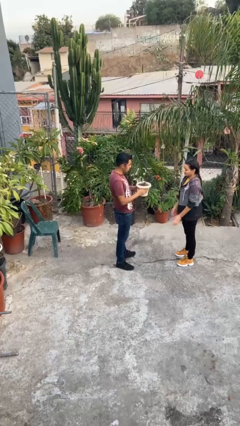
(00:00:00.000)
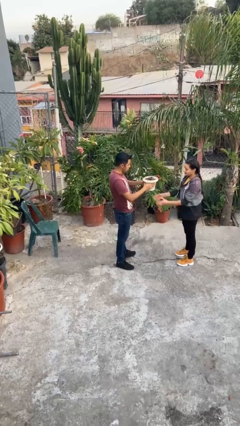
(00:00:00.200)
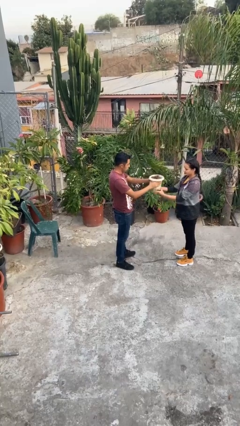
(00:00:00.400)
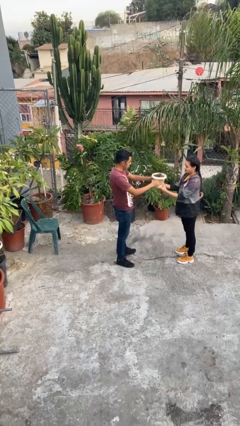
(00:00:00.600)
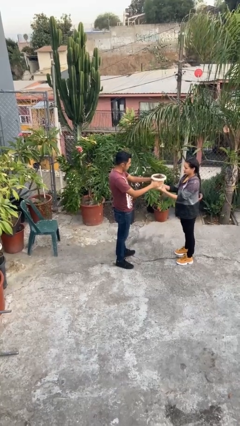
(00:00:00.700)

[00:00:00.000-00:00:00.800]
person transfers object to person

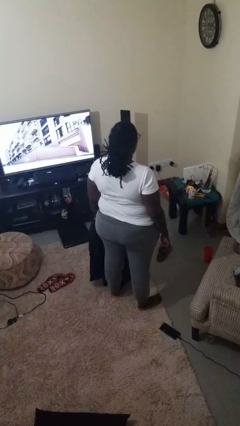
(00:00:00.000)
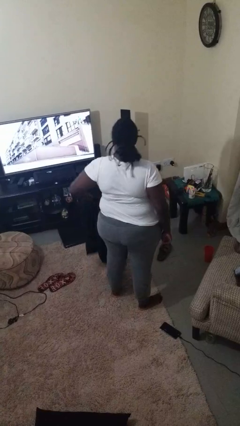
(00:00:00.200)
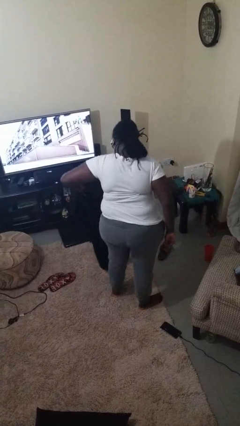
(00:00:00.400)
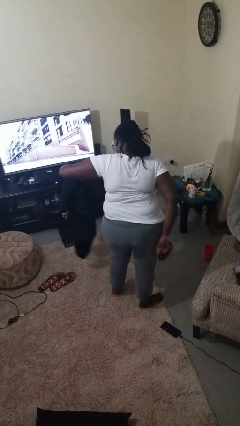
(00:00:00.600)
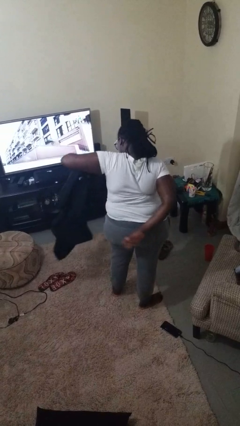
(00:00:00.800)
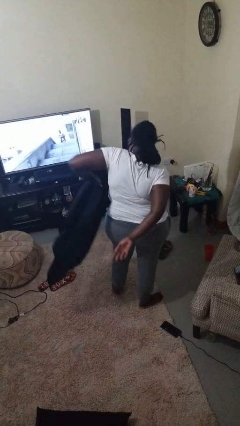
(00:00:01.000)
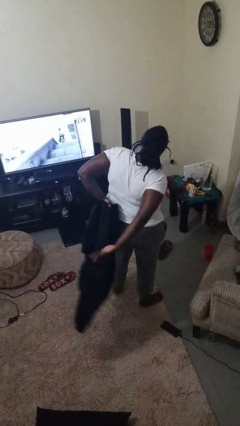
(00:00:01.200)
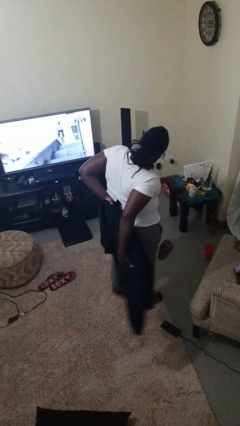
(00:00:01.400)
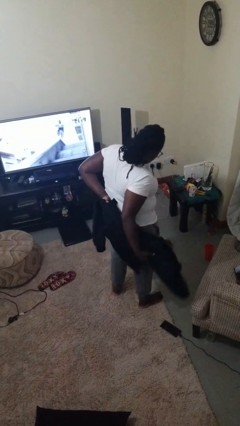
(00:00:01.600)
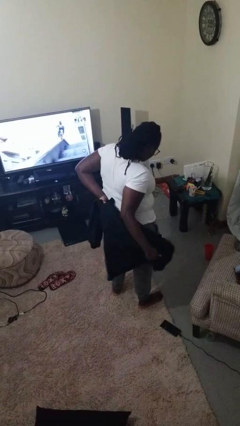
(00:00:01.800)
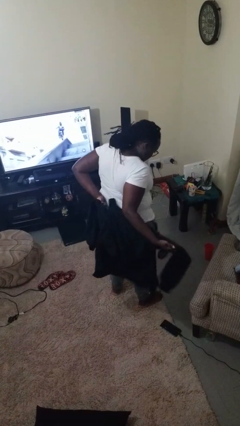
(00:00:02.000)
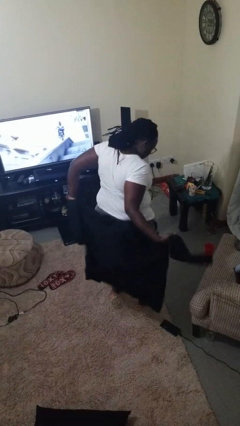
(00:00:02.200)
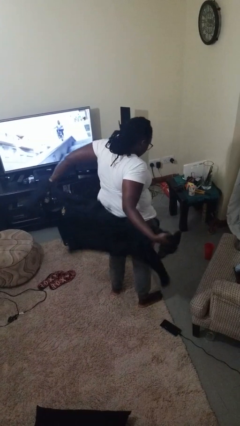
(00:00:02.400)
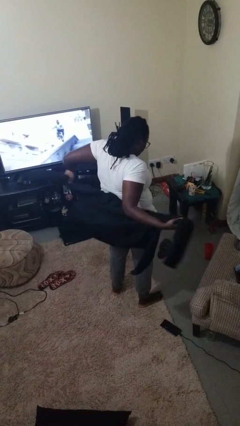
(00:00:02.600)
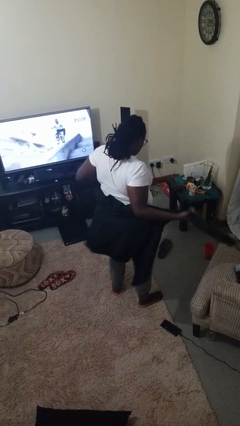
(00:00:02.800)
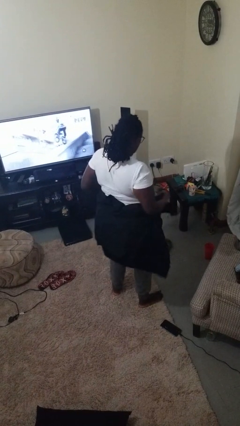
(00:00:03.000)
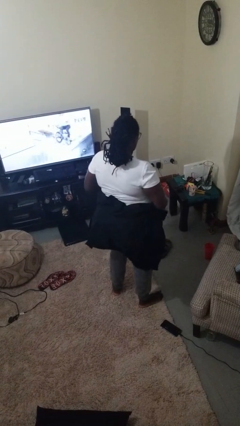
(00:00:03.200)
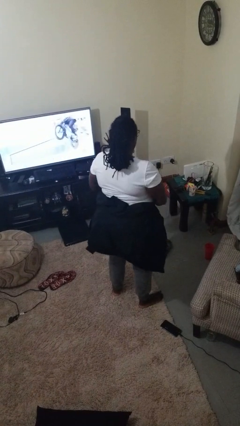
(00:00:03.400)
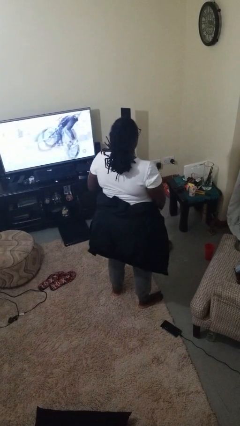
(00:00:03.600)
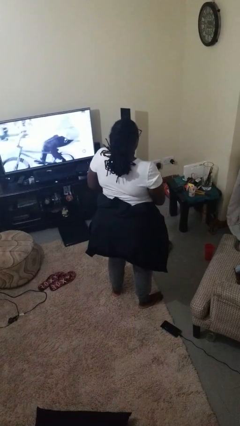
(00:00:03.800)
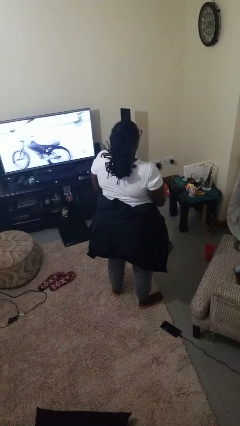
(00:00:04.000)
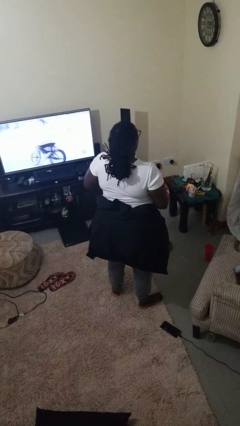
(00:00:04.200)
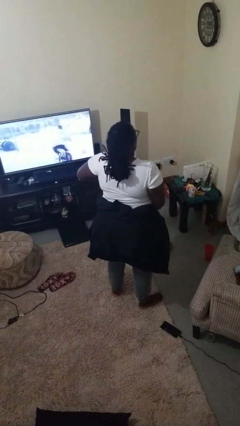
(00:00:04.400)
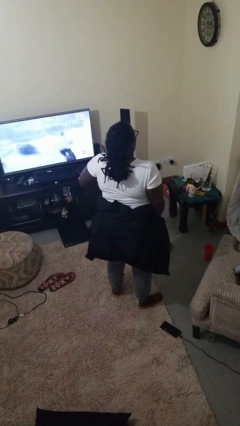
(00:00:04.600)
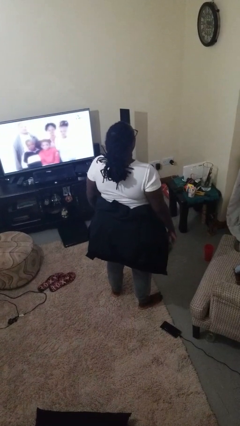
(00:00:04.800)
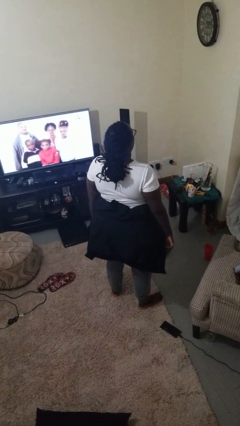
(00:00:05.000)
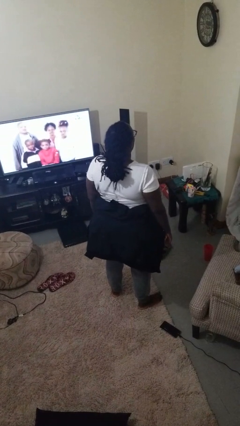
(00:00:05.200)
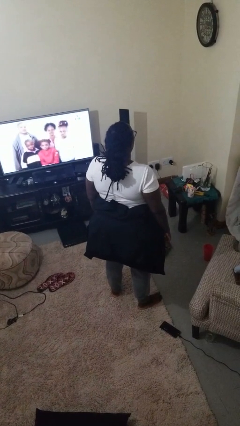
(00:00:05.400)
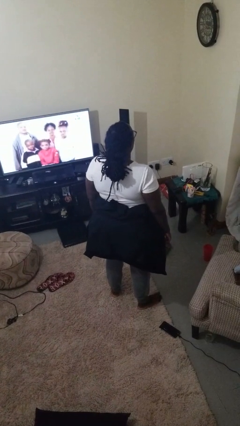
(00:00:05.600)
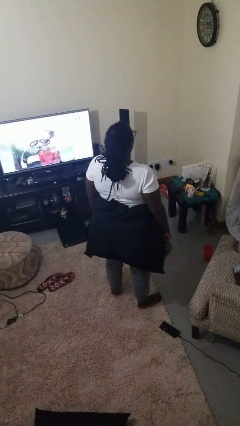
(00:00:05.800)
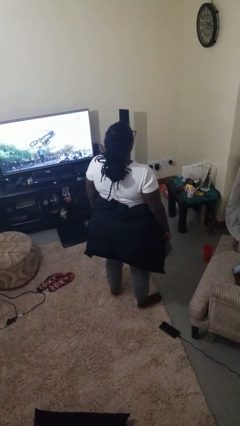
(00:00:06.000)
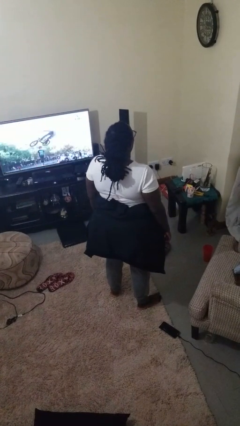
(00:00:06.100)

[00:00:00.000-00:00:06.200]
person ties jacket around waist

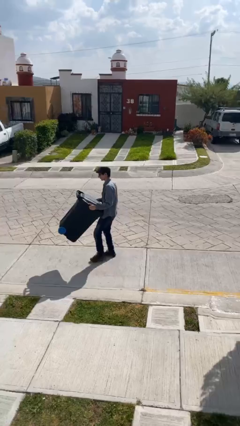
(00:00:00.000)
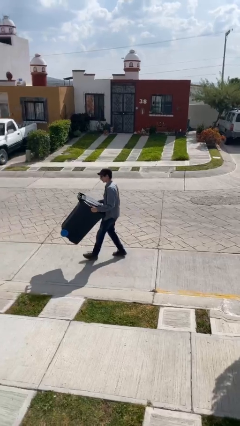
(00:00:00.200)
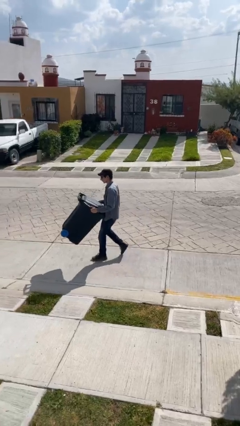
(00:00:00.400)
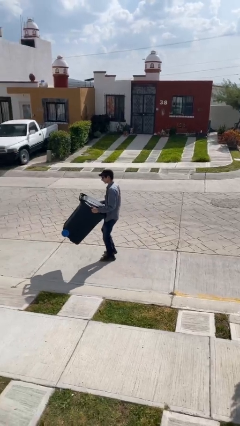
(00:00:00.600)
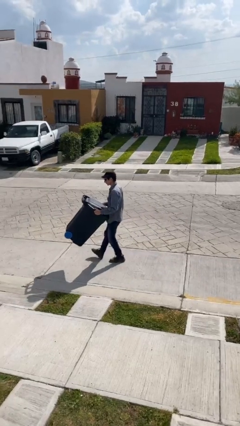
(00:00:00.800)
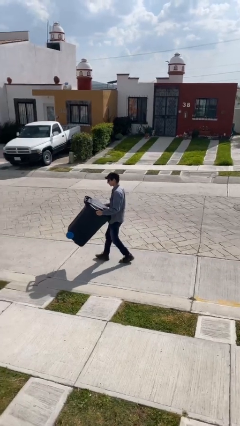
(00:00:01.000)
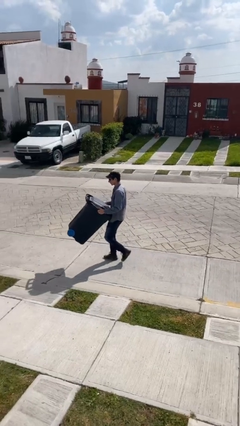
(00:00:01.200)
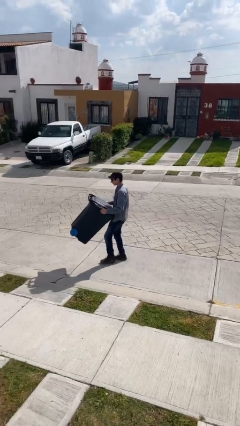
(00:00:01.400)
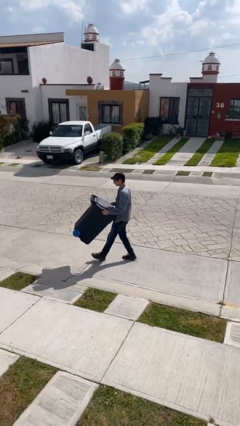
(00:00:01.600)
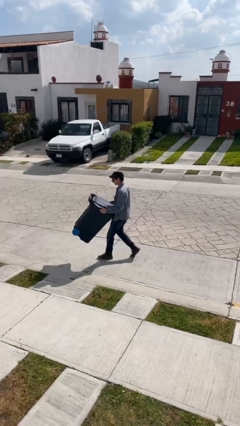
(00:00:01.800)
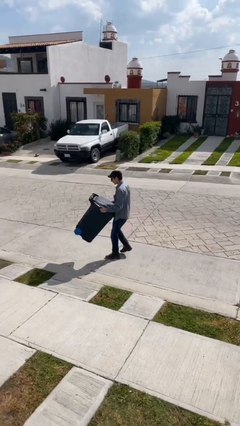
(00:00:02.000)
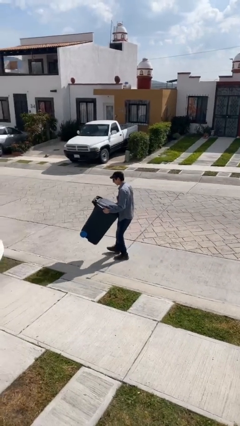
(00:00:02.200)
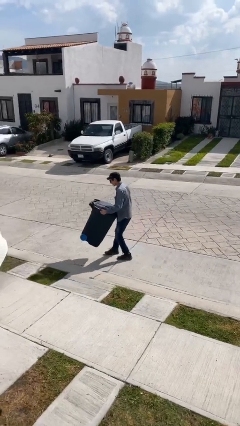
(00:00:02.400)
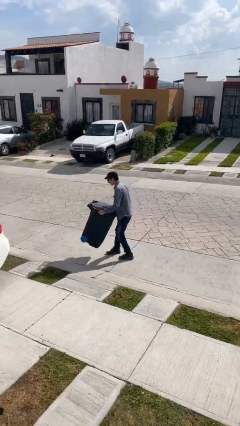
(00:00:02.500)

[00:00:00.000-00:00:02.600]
person carries heavy object

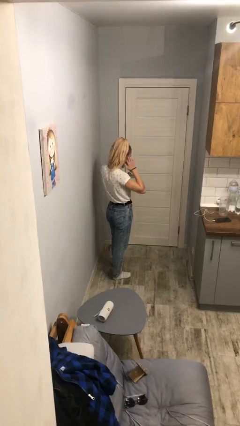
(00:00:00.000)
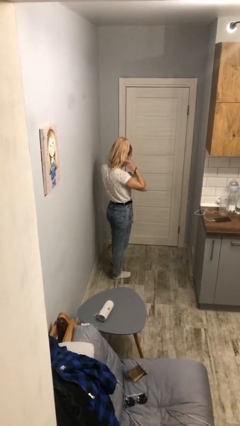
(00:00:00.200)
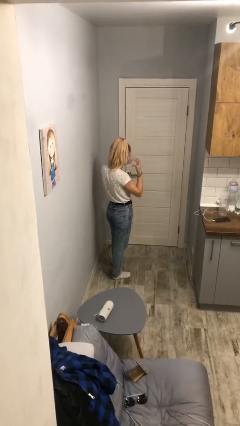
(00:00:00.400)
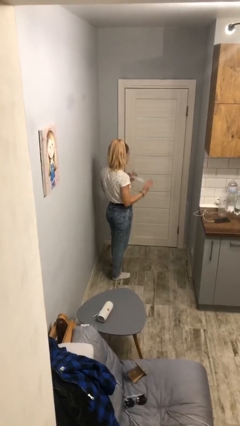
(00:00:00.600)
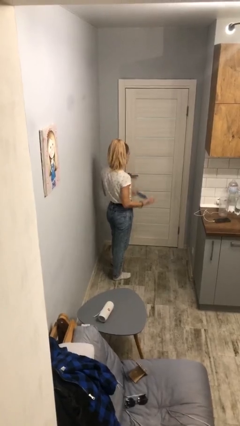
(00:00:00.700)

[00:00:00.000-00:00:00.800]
person takes off facemask

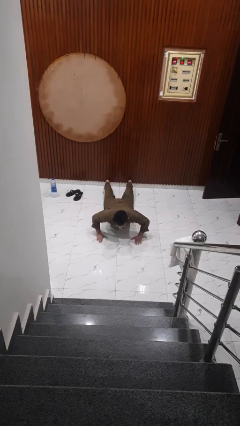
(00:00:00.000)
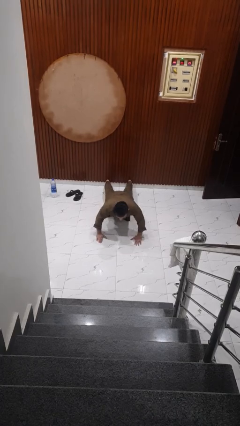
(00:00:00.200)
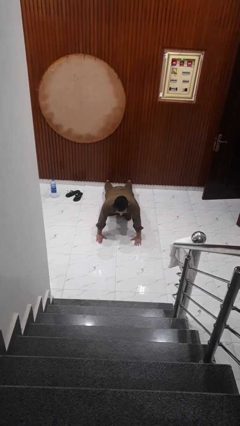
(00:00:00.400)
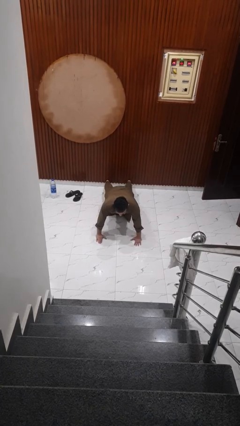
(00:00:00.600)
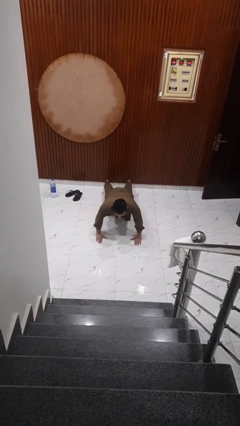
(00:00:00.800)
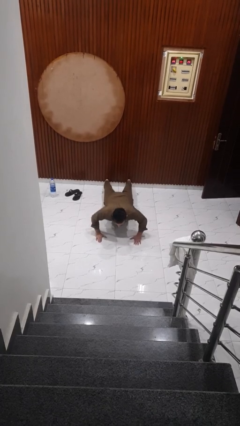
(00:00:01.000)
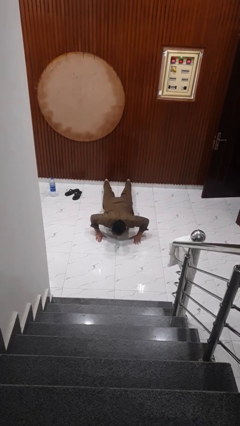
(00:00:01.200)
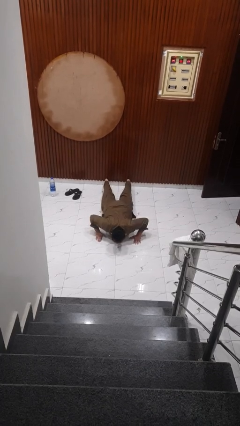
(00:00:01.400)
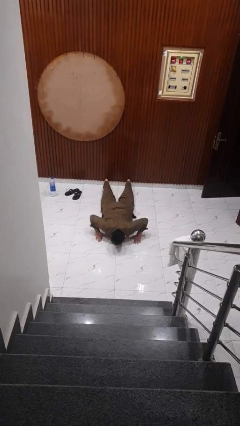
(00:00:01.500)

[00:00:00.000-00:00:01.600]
person exercises with pushup

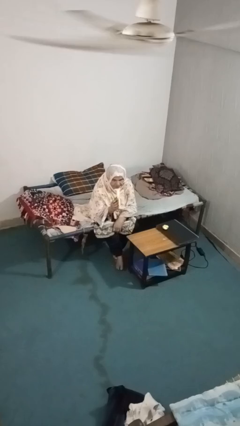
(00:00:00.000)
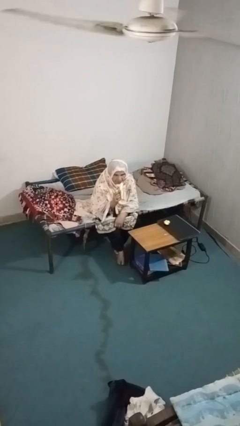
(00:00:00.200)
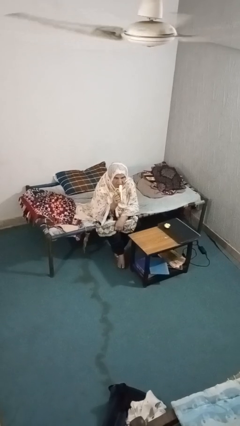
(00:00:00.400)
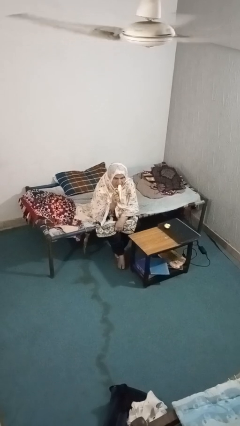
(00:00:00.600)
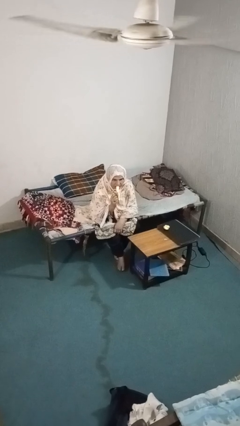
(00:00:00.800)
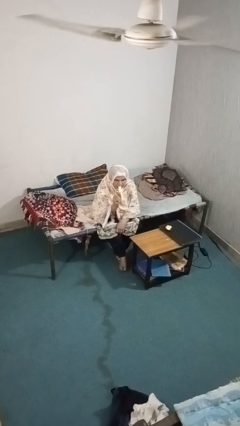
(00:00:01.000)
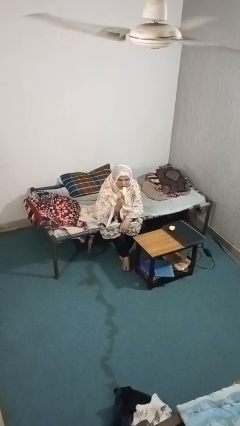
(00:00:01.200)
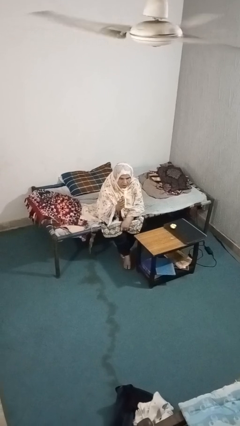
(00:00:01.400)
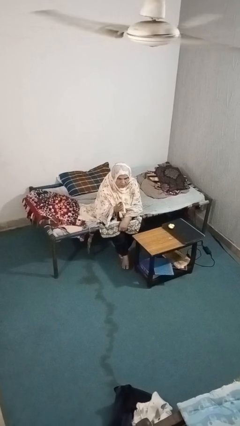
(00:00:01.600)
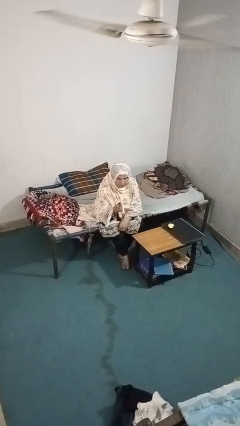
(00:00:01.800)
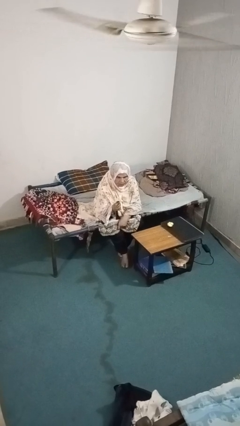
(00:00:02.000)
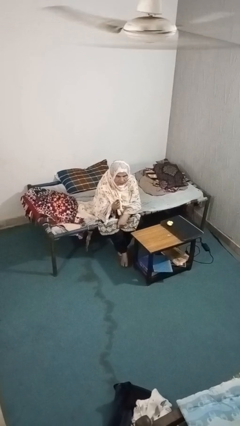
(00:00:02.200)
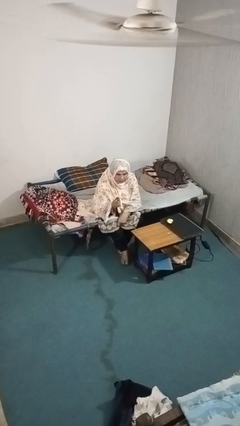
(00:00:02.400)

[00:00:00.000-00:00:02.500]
person eats banana

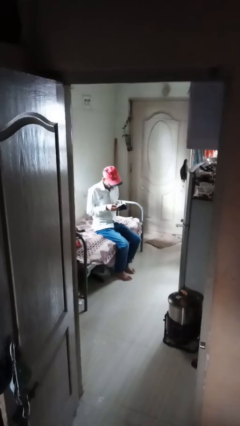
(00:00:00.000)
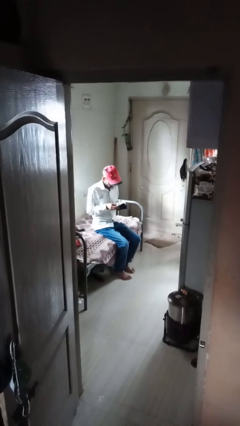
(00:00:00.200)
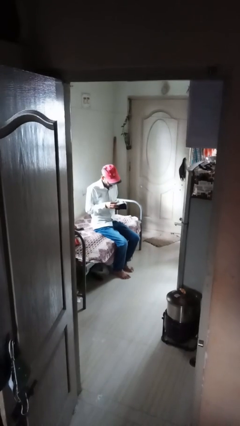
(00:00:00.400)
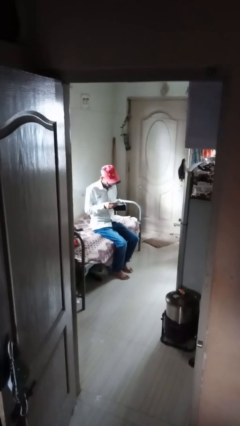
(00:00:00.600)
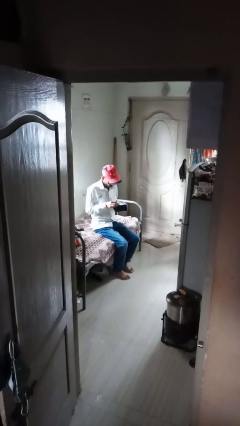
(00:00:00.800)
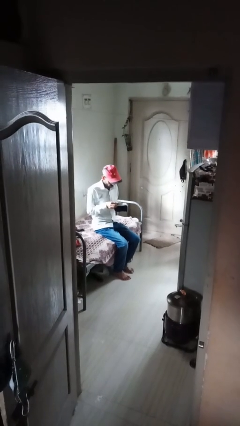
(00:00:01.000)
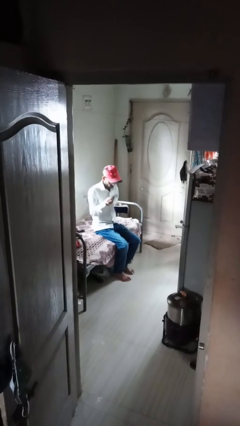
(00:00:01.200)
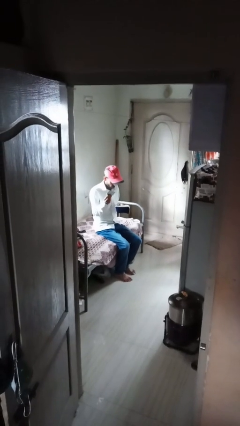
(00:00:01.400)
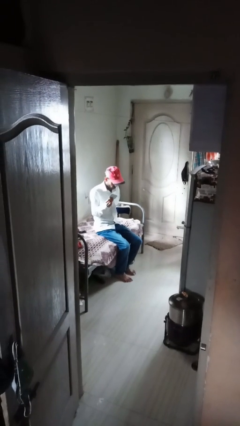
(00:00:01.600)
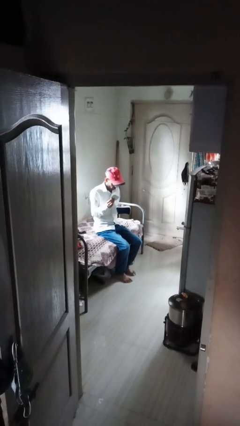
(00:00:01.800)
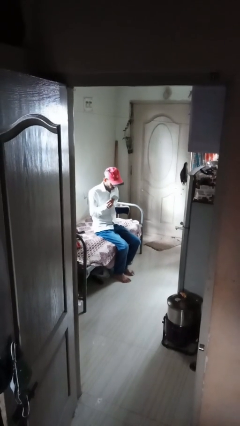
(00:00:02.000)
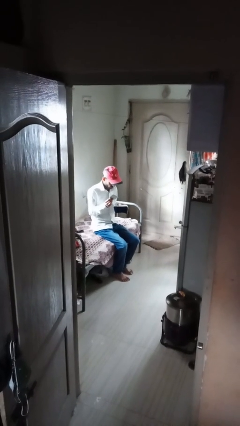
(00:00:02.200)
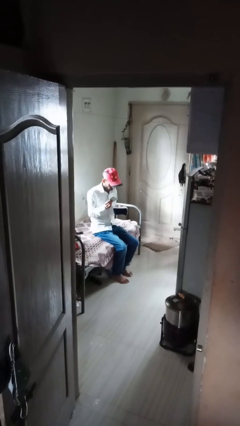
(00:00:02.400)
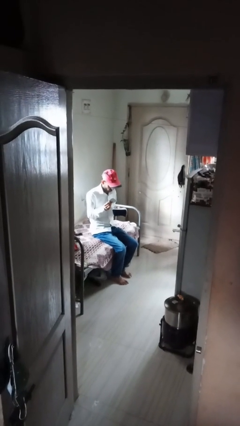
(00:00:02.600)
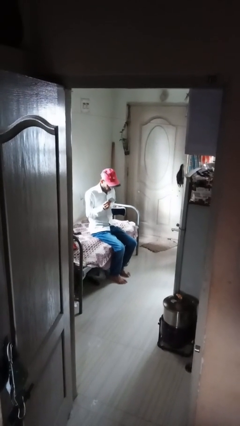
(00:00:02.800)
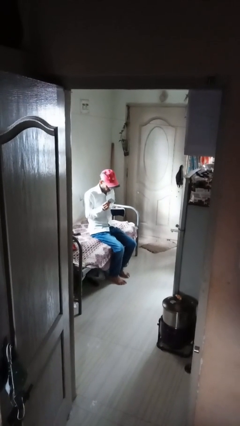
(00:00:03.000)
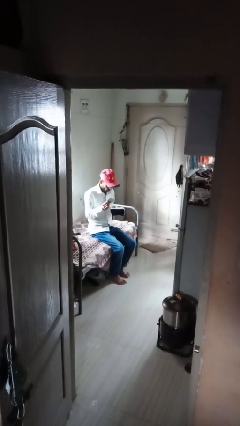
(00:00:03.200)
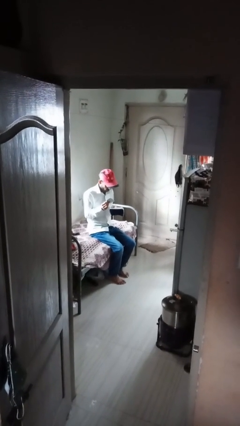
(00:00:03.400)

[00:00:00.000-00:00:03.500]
person takes object from purse
